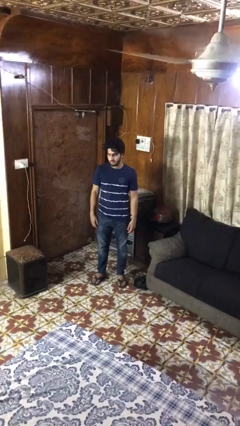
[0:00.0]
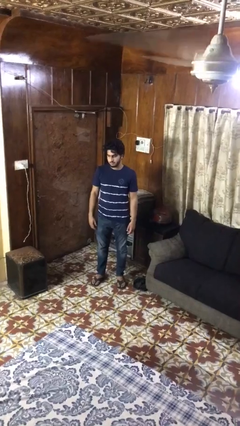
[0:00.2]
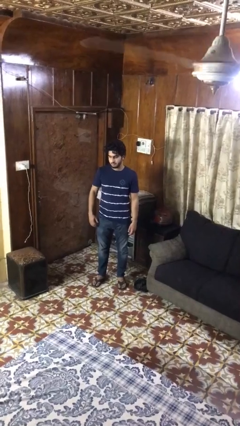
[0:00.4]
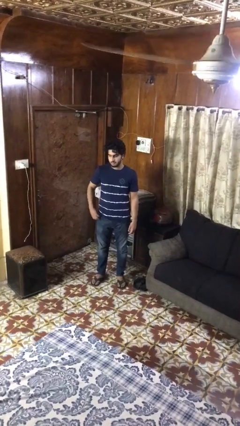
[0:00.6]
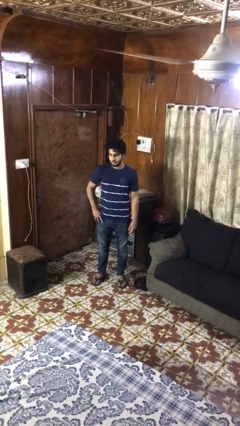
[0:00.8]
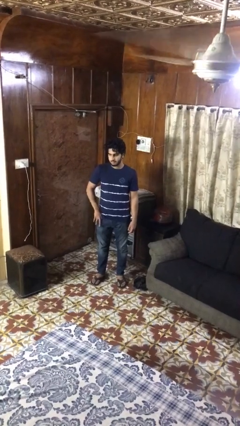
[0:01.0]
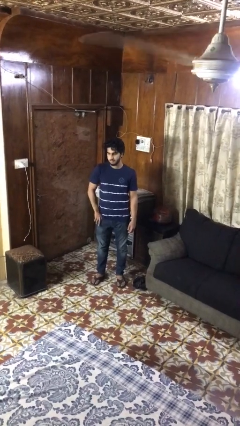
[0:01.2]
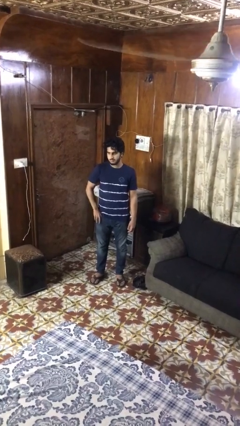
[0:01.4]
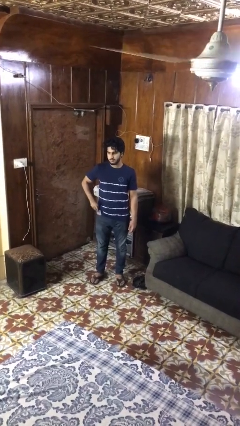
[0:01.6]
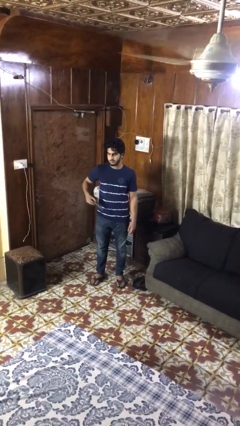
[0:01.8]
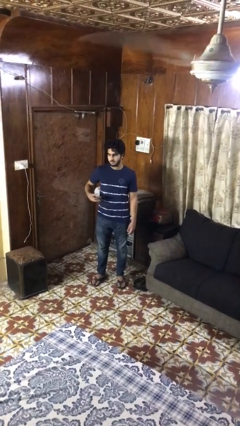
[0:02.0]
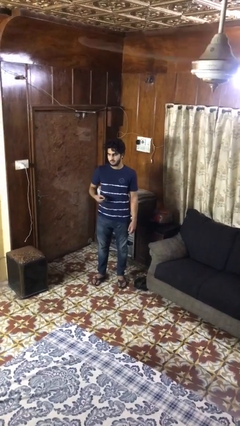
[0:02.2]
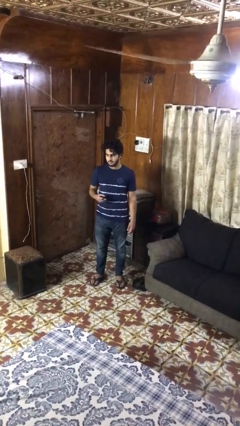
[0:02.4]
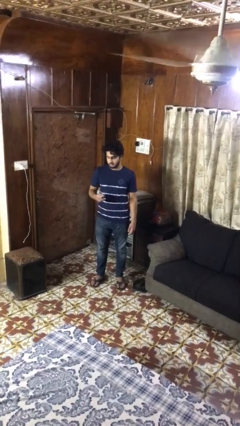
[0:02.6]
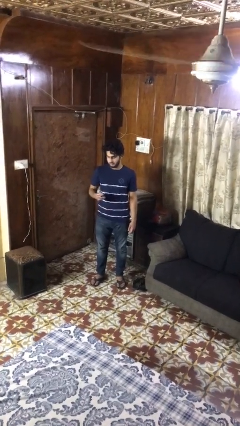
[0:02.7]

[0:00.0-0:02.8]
person takes phone from pocket

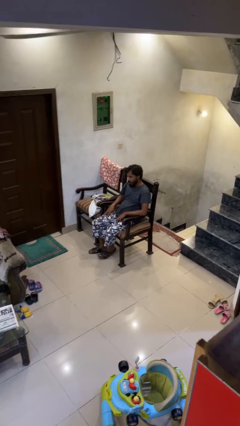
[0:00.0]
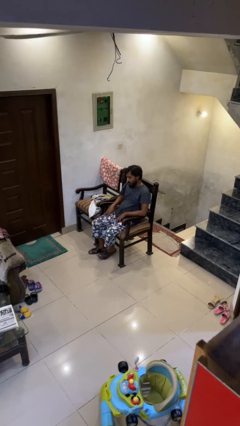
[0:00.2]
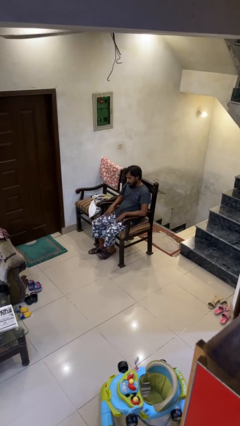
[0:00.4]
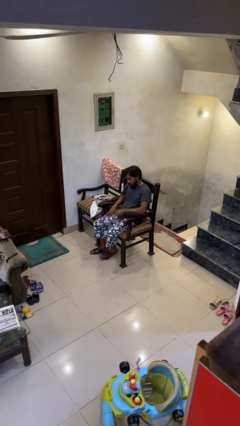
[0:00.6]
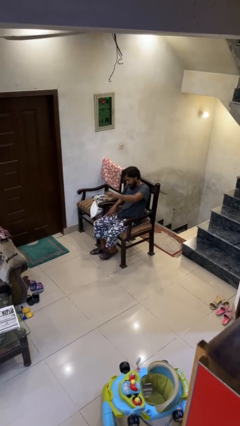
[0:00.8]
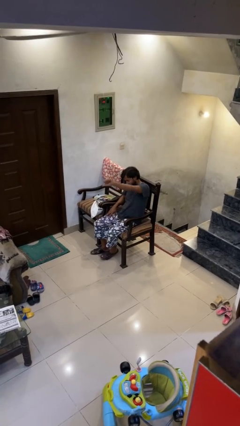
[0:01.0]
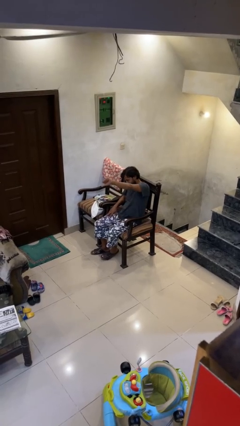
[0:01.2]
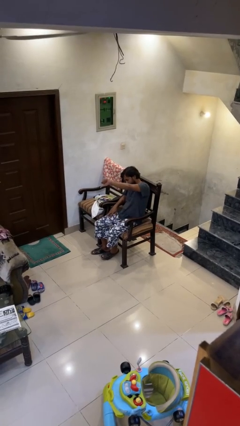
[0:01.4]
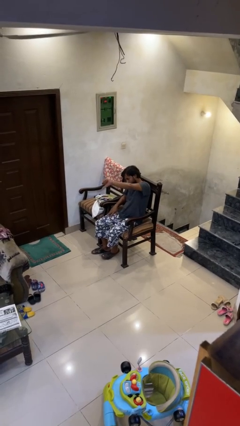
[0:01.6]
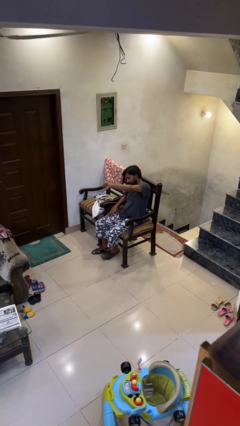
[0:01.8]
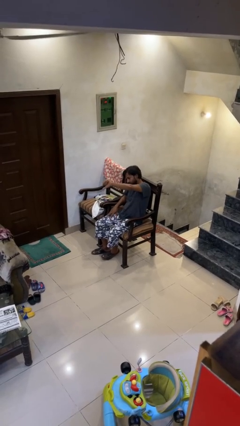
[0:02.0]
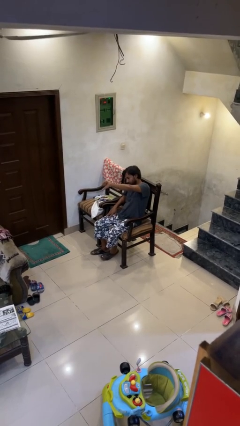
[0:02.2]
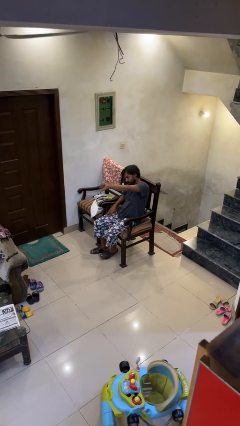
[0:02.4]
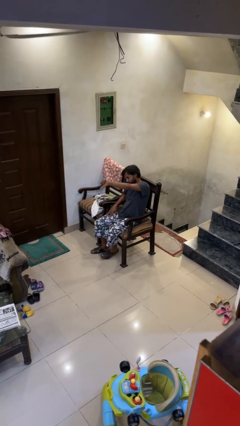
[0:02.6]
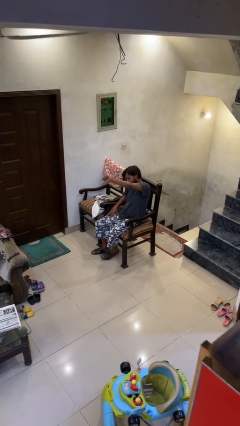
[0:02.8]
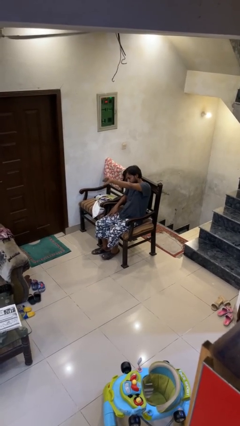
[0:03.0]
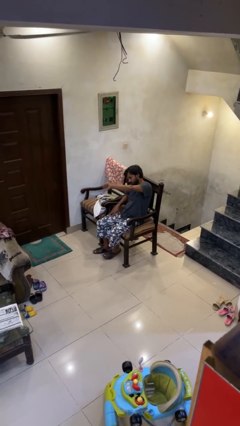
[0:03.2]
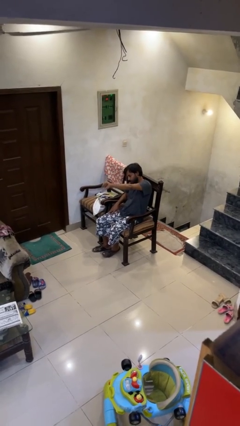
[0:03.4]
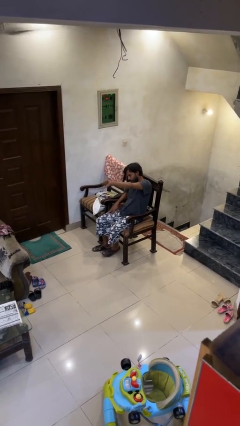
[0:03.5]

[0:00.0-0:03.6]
person gestures thumbs down

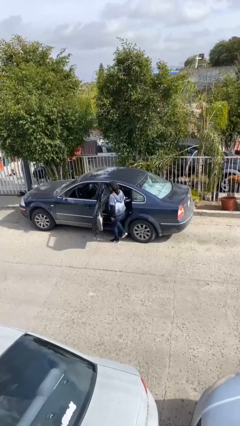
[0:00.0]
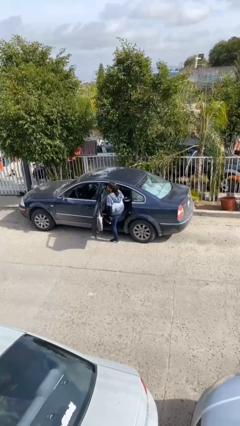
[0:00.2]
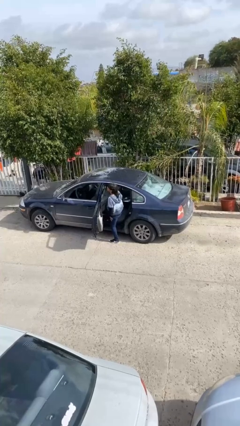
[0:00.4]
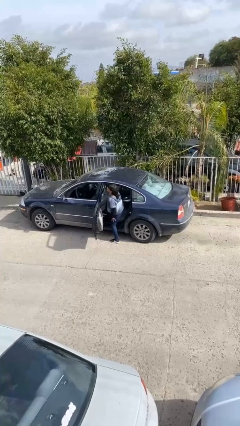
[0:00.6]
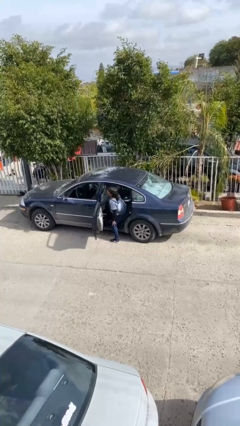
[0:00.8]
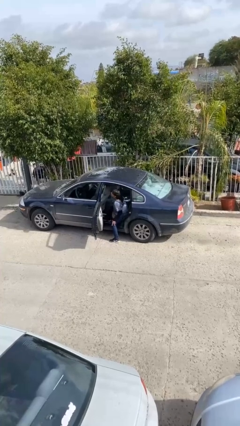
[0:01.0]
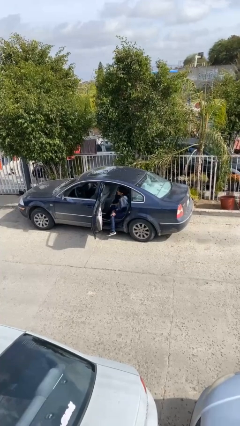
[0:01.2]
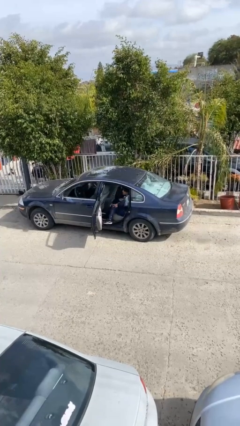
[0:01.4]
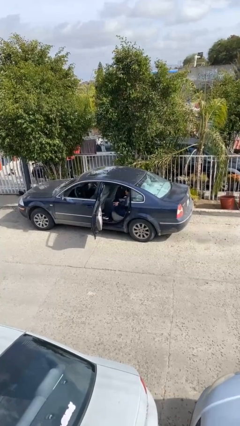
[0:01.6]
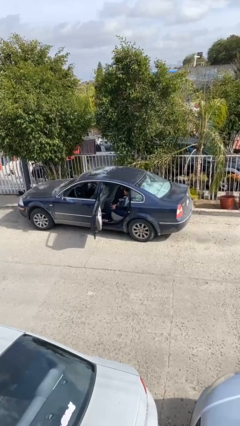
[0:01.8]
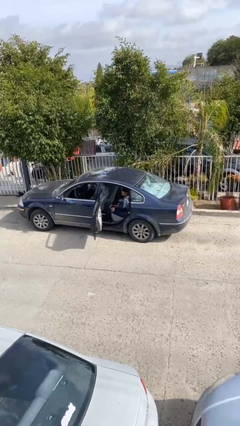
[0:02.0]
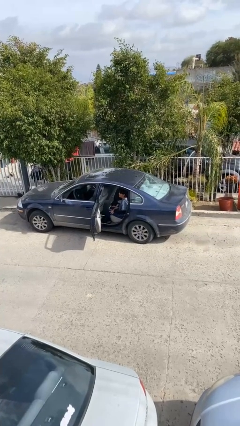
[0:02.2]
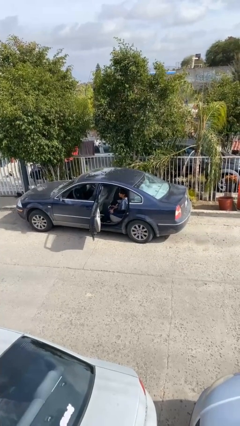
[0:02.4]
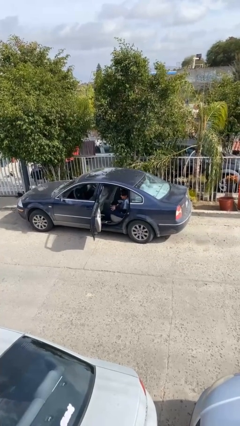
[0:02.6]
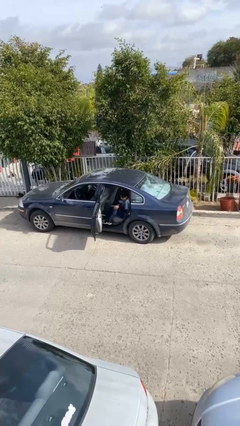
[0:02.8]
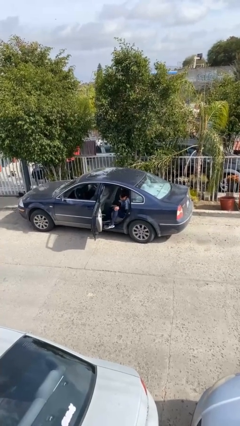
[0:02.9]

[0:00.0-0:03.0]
person enters car

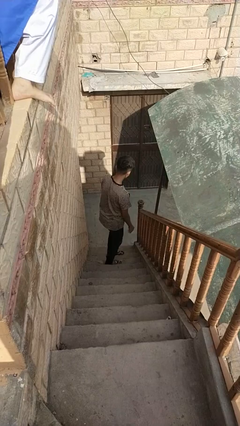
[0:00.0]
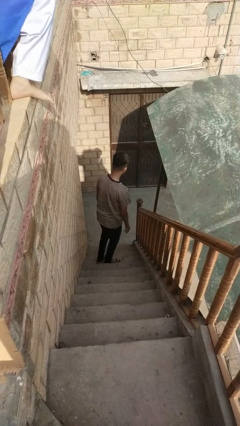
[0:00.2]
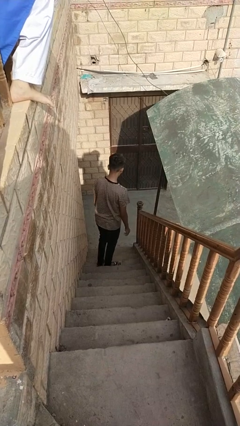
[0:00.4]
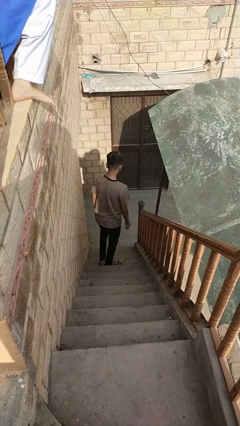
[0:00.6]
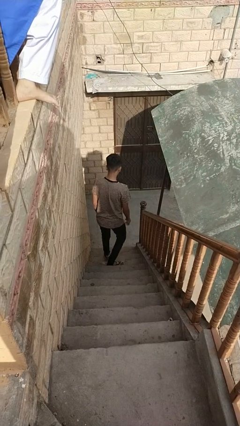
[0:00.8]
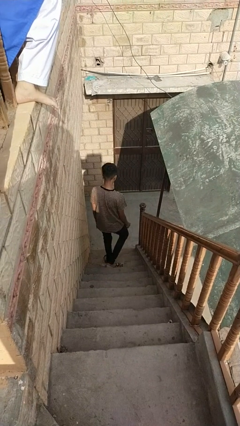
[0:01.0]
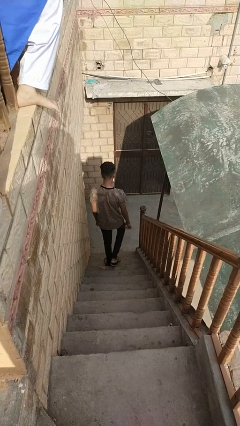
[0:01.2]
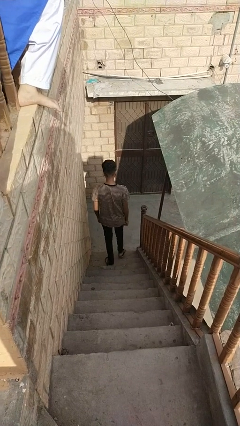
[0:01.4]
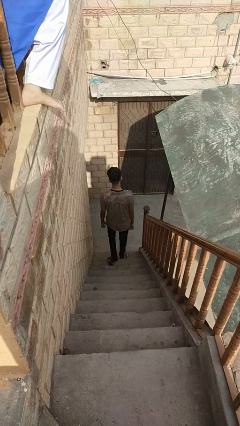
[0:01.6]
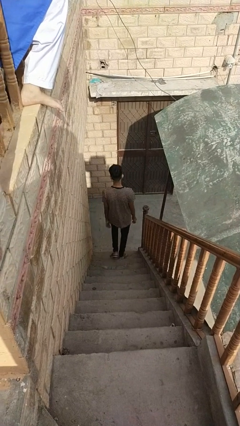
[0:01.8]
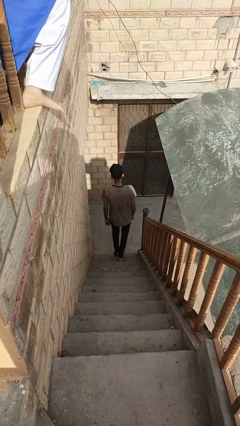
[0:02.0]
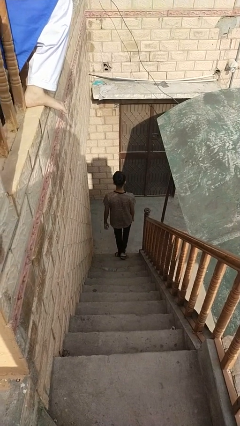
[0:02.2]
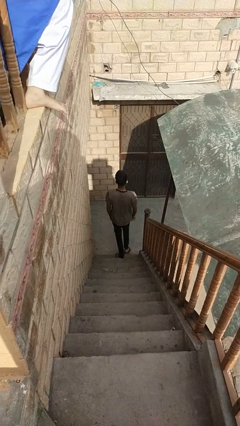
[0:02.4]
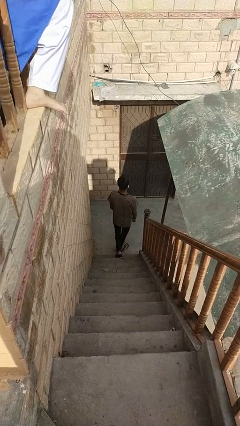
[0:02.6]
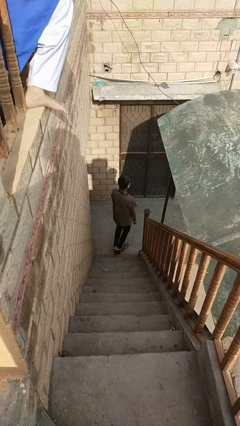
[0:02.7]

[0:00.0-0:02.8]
person climbs down stairs

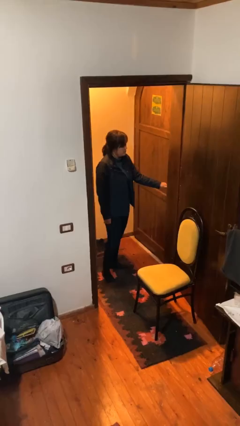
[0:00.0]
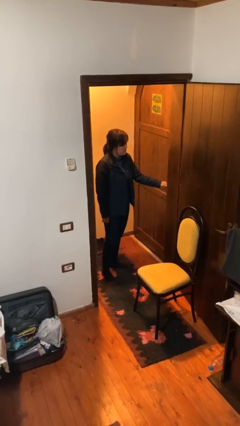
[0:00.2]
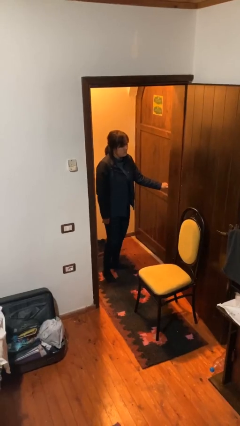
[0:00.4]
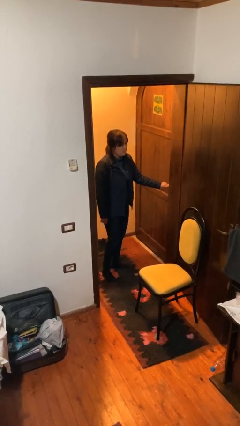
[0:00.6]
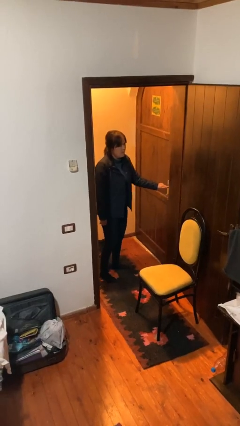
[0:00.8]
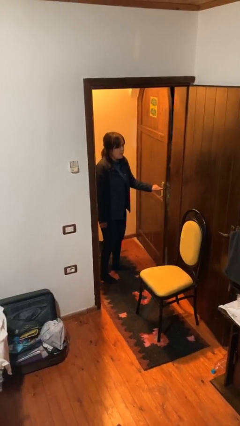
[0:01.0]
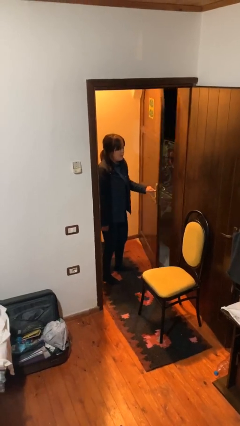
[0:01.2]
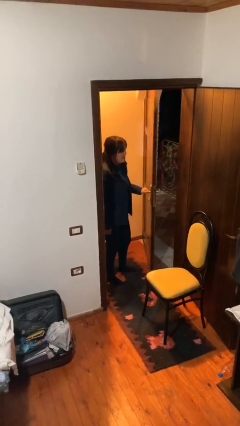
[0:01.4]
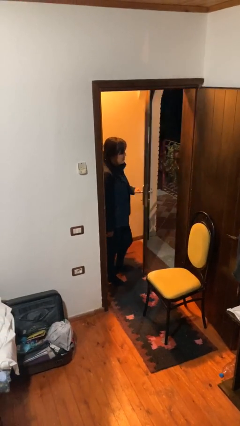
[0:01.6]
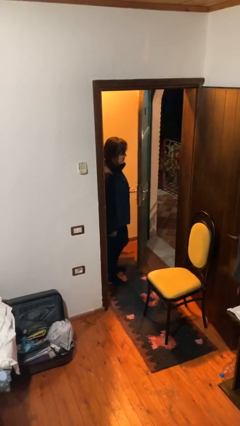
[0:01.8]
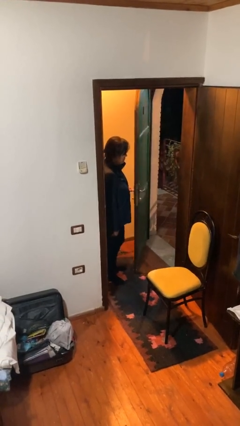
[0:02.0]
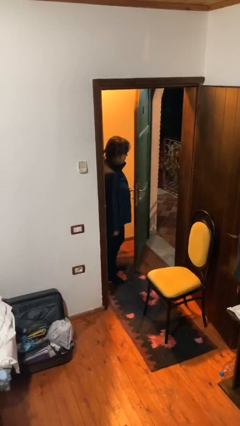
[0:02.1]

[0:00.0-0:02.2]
person opens facility door

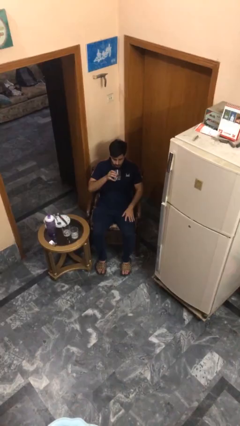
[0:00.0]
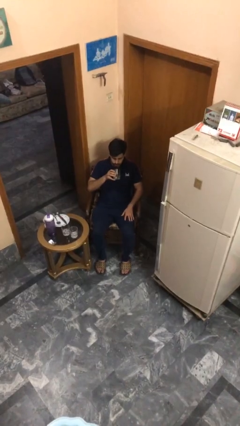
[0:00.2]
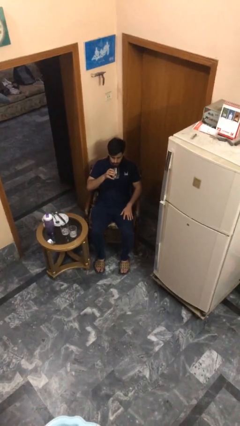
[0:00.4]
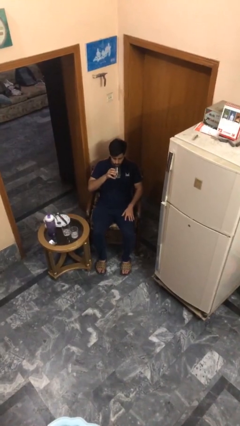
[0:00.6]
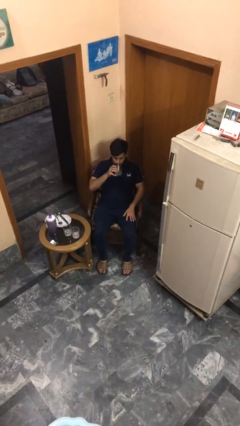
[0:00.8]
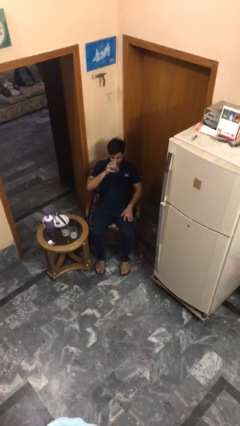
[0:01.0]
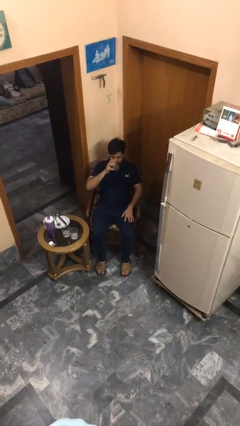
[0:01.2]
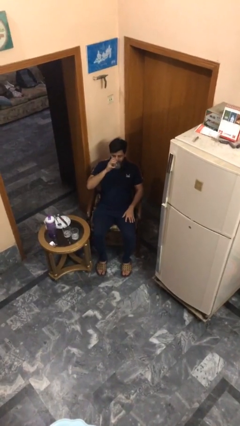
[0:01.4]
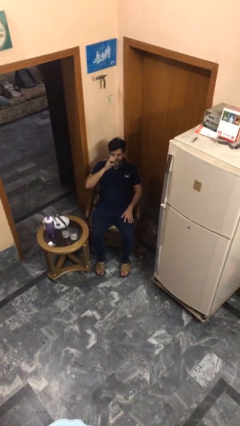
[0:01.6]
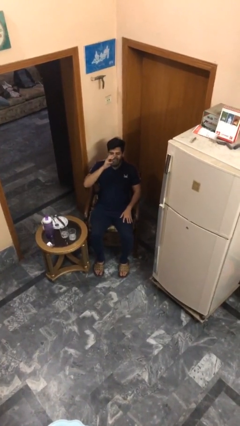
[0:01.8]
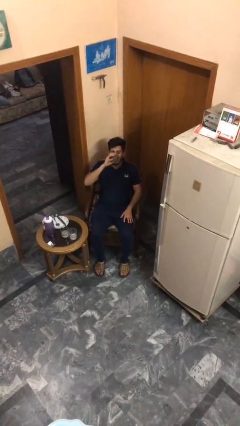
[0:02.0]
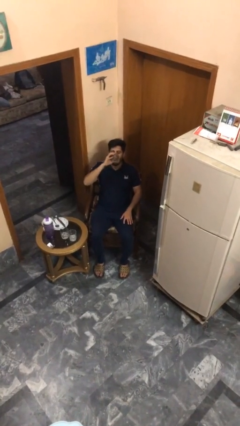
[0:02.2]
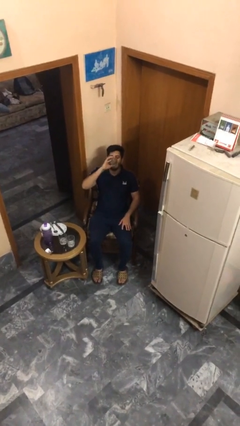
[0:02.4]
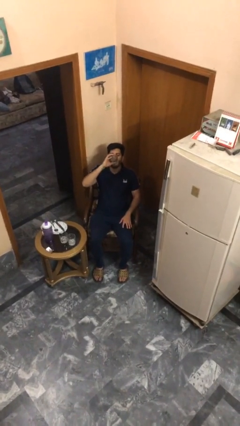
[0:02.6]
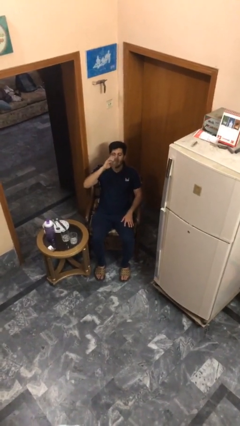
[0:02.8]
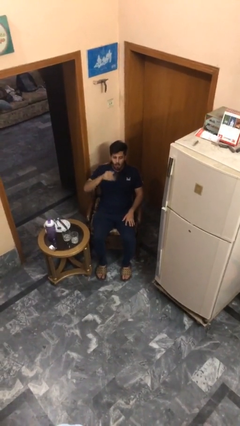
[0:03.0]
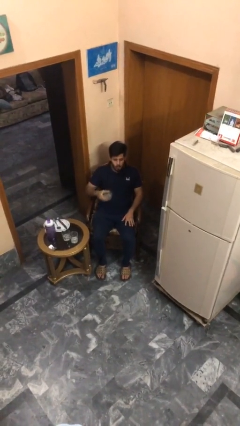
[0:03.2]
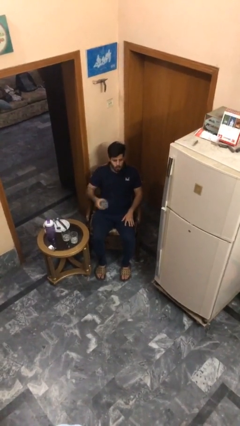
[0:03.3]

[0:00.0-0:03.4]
person drinks from shotglass
